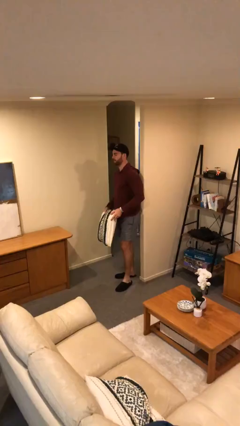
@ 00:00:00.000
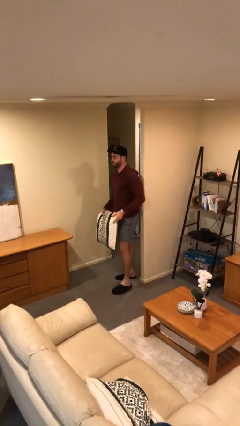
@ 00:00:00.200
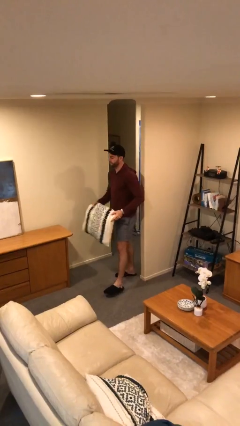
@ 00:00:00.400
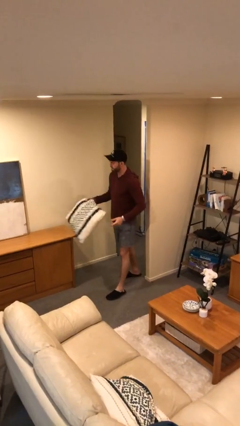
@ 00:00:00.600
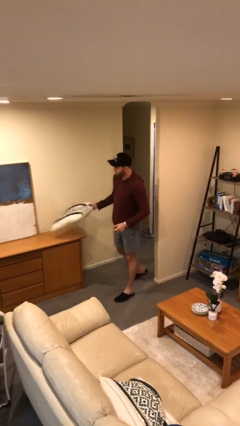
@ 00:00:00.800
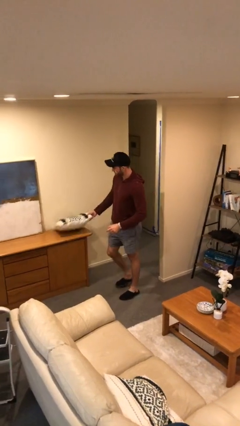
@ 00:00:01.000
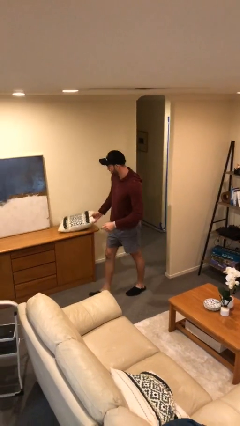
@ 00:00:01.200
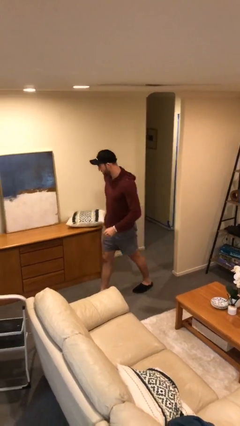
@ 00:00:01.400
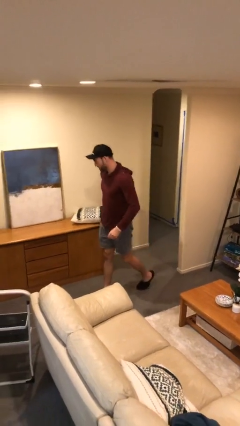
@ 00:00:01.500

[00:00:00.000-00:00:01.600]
person puts down object on table

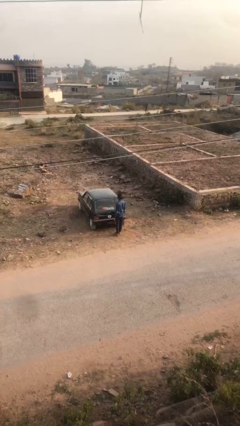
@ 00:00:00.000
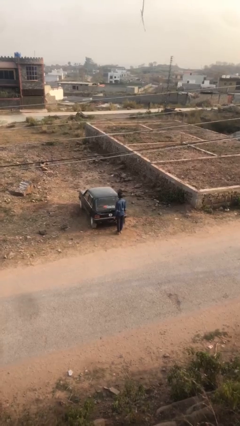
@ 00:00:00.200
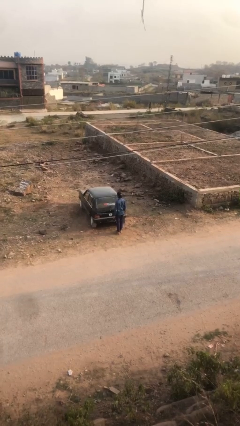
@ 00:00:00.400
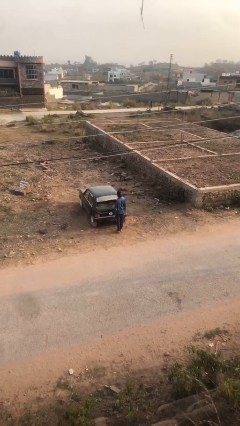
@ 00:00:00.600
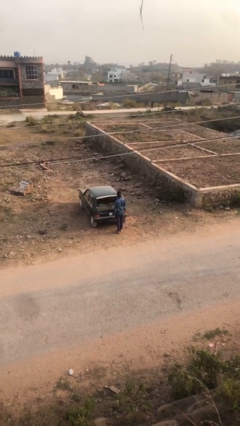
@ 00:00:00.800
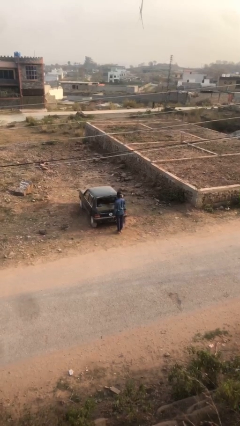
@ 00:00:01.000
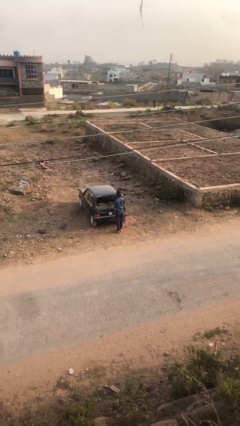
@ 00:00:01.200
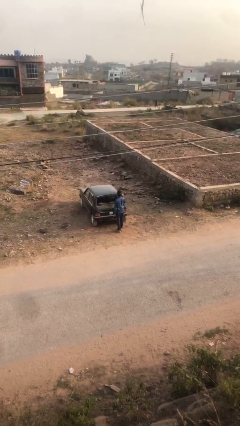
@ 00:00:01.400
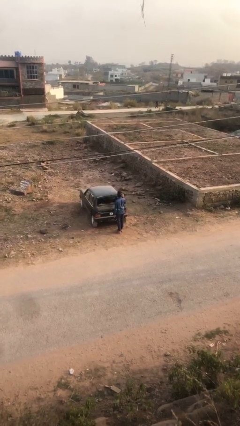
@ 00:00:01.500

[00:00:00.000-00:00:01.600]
person opens car trunk

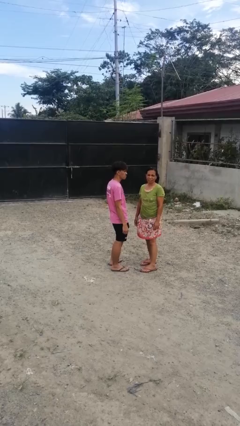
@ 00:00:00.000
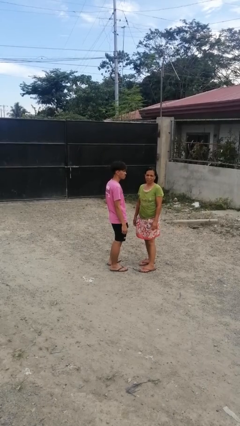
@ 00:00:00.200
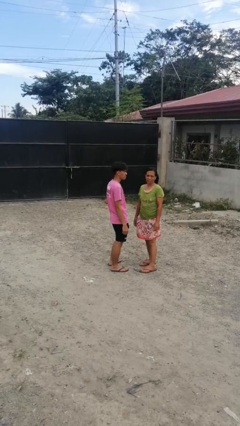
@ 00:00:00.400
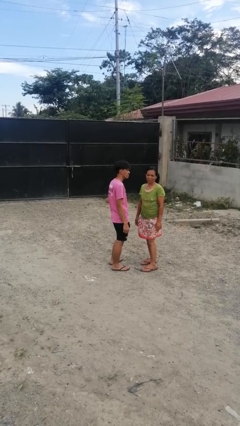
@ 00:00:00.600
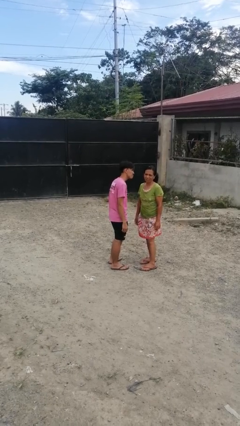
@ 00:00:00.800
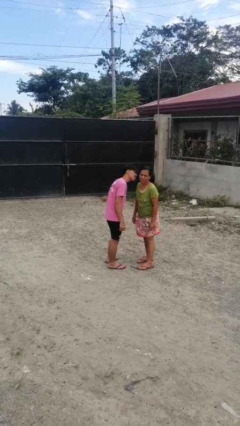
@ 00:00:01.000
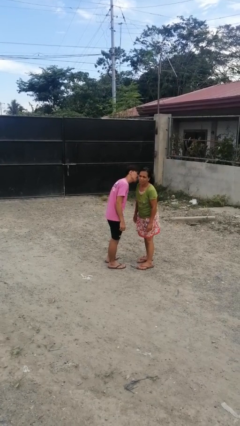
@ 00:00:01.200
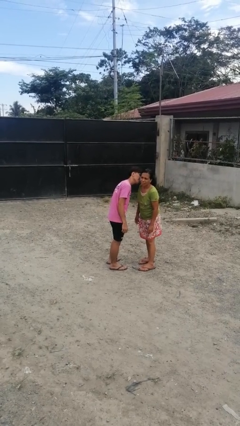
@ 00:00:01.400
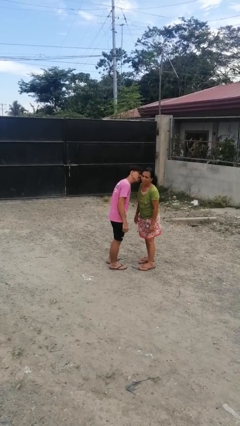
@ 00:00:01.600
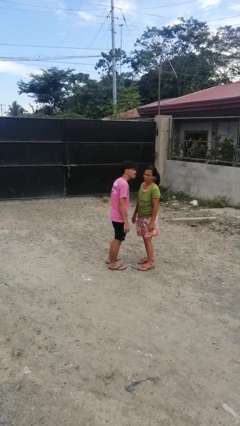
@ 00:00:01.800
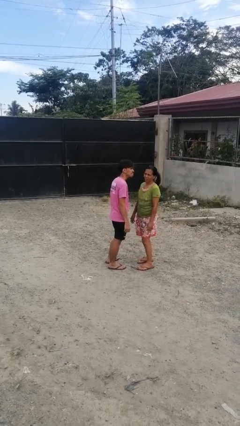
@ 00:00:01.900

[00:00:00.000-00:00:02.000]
person kisses cheek of person

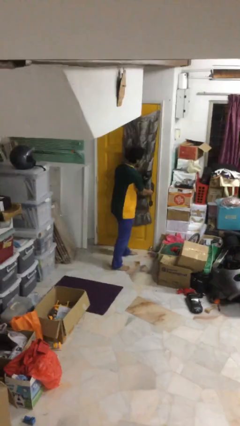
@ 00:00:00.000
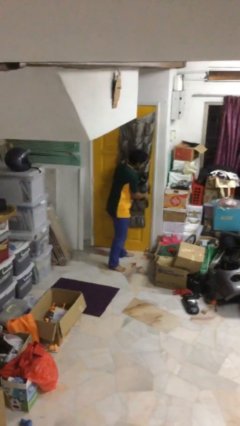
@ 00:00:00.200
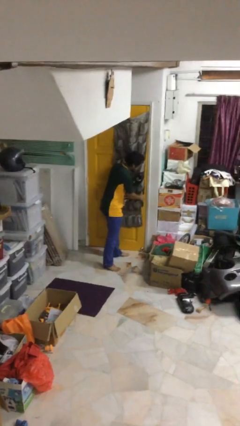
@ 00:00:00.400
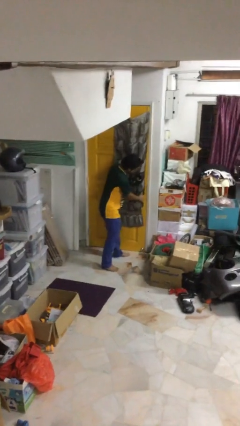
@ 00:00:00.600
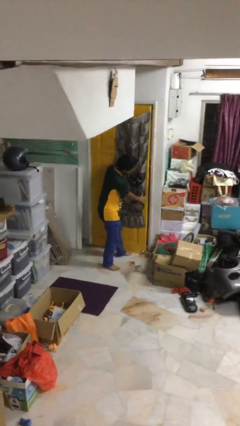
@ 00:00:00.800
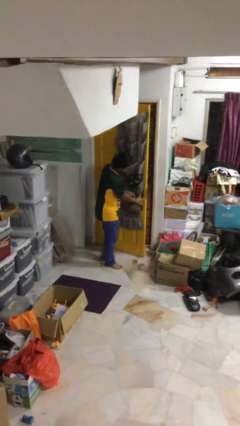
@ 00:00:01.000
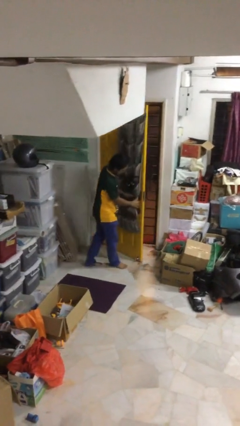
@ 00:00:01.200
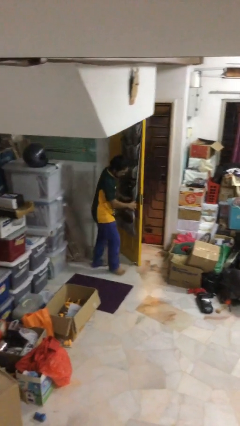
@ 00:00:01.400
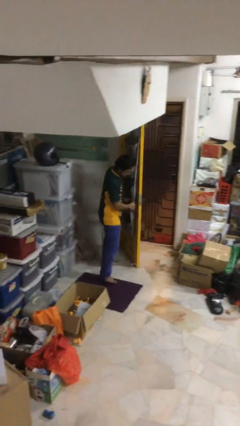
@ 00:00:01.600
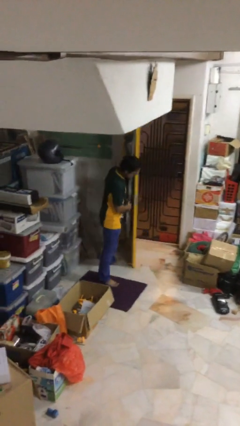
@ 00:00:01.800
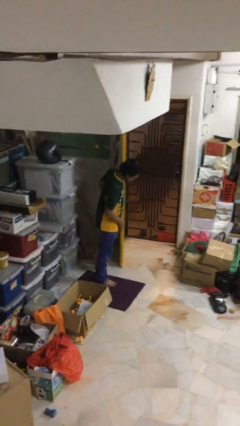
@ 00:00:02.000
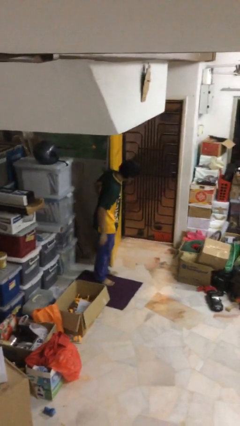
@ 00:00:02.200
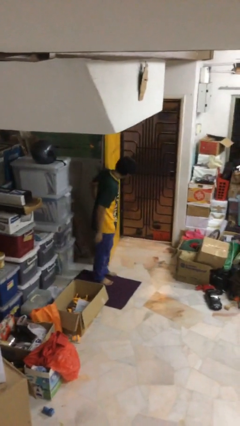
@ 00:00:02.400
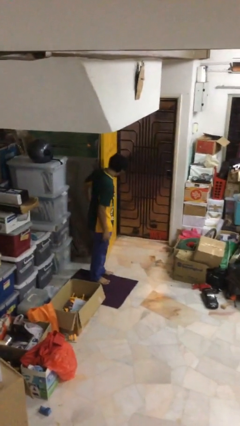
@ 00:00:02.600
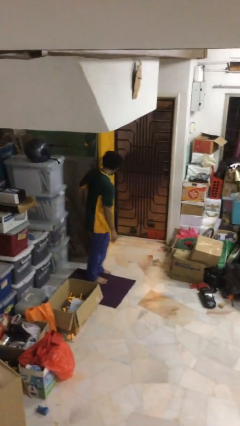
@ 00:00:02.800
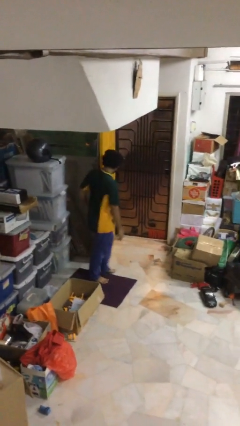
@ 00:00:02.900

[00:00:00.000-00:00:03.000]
person opens facility door

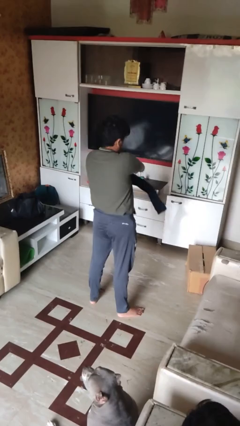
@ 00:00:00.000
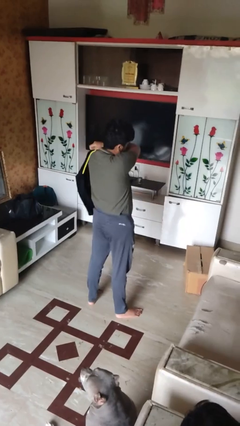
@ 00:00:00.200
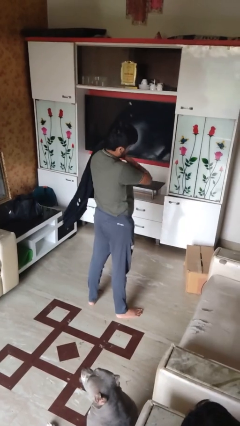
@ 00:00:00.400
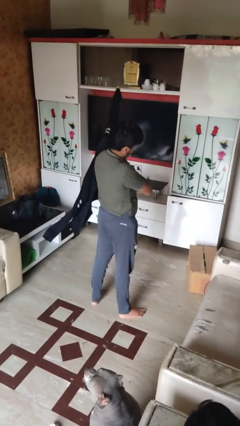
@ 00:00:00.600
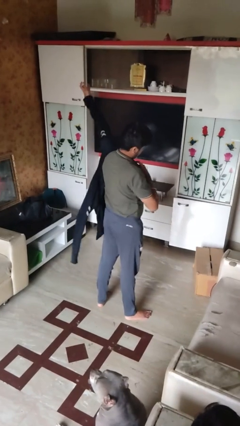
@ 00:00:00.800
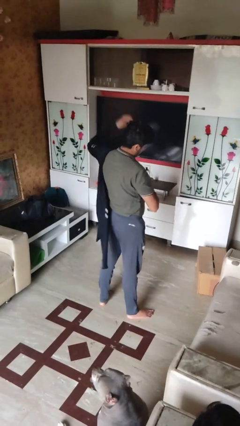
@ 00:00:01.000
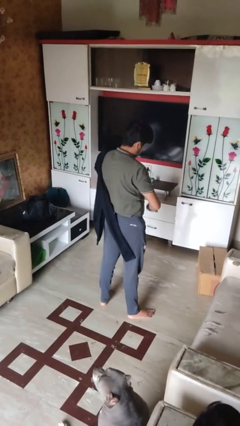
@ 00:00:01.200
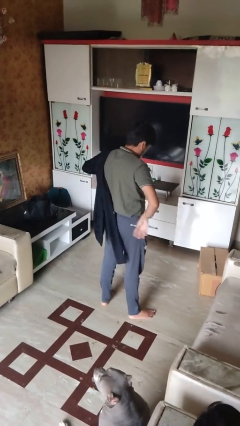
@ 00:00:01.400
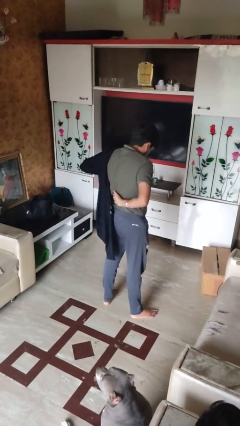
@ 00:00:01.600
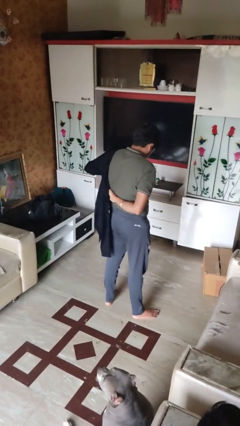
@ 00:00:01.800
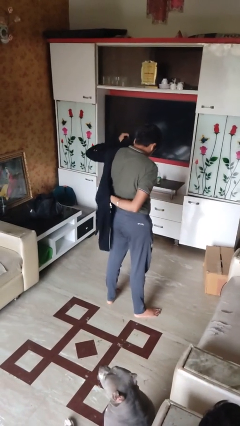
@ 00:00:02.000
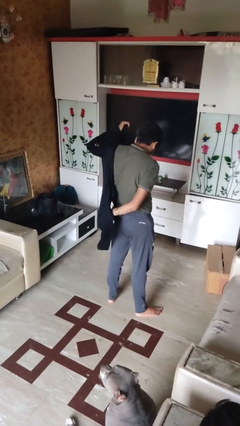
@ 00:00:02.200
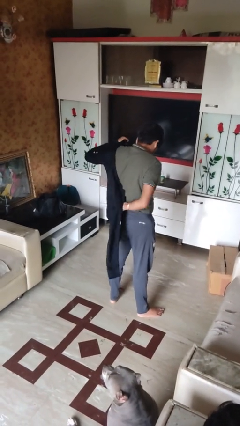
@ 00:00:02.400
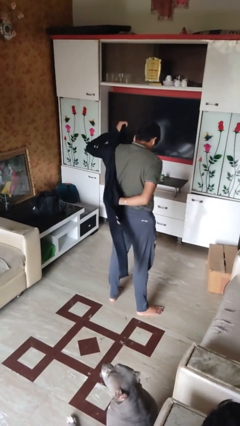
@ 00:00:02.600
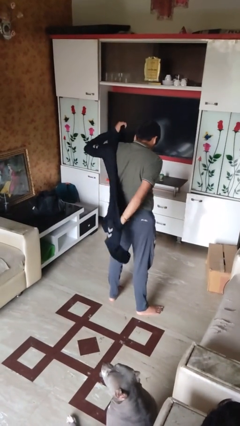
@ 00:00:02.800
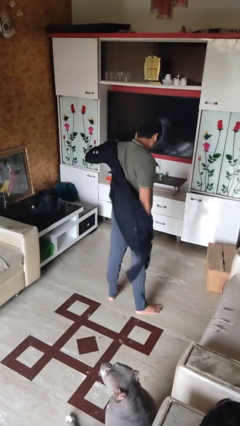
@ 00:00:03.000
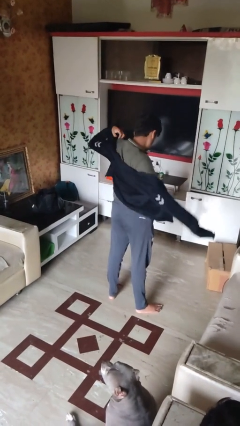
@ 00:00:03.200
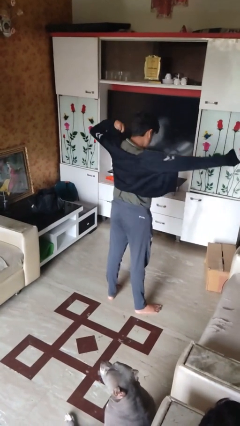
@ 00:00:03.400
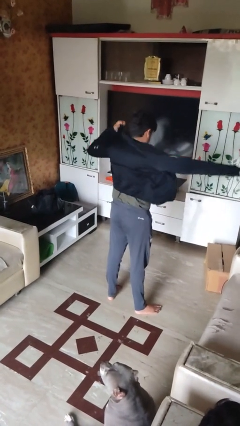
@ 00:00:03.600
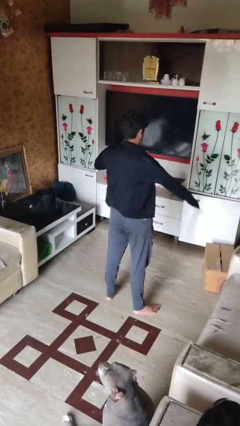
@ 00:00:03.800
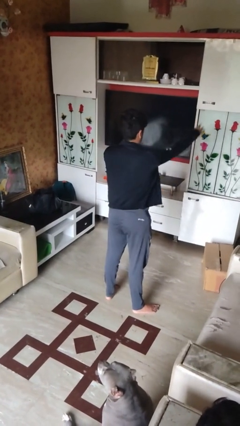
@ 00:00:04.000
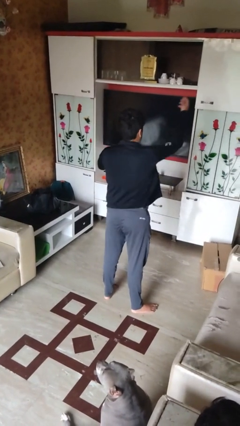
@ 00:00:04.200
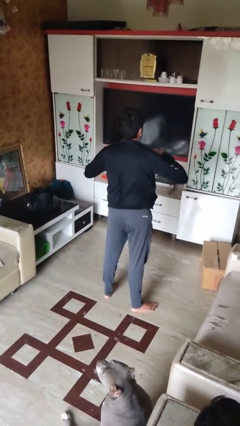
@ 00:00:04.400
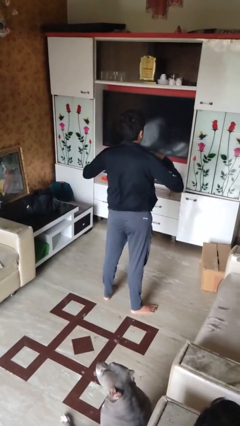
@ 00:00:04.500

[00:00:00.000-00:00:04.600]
person puts on jacket

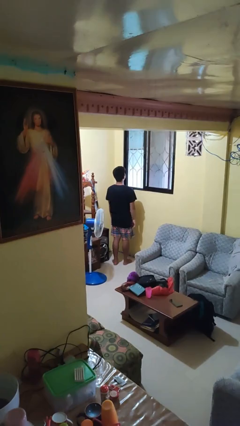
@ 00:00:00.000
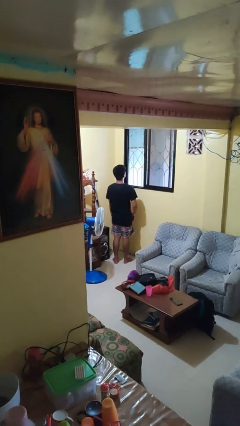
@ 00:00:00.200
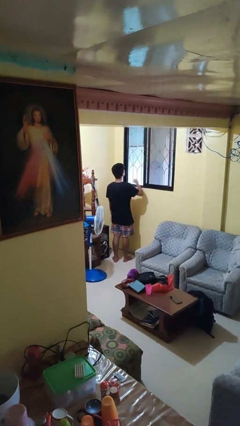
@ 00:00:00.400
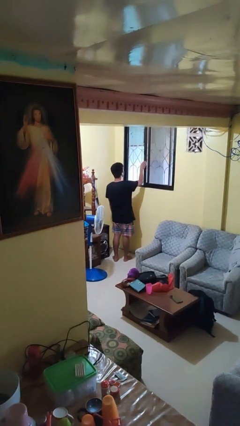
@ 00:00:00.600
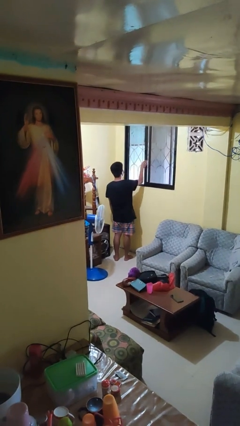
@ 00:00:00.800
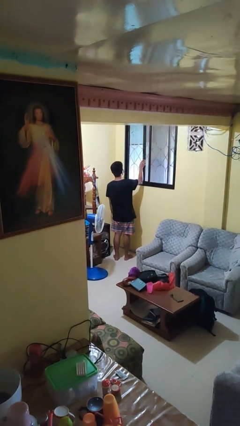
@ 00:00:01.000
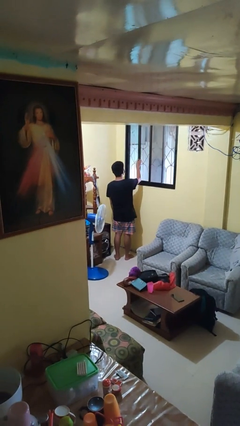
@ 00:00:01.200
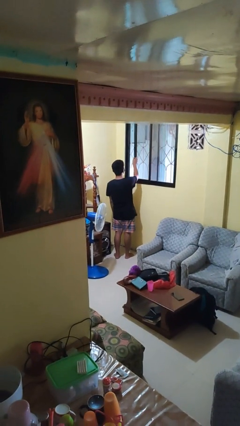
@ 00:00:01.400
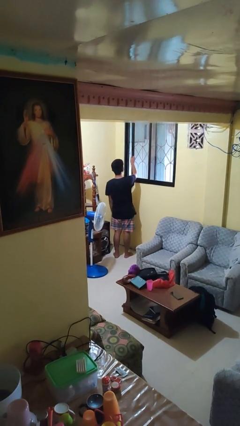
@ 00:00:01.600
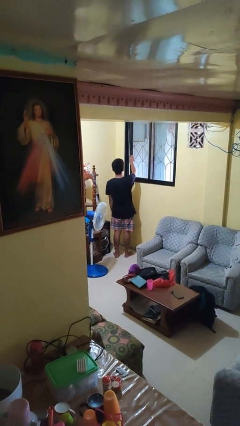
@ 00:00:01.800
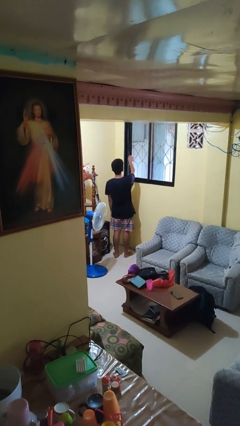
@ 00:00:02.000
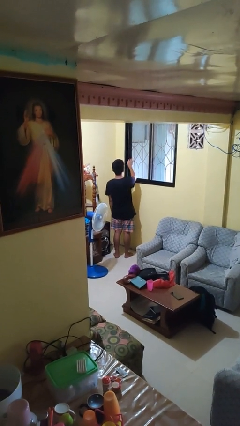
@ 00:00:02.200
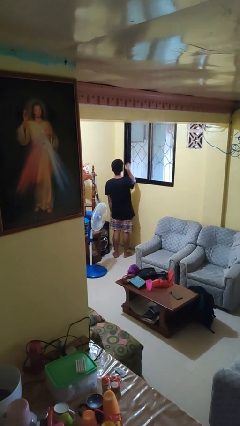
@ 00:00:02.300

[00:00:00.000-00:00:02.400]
person closes home window

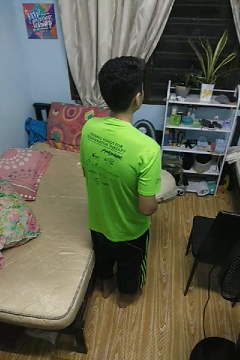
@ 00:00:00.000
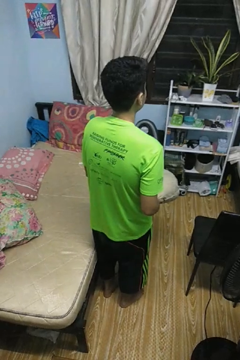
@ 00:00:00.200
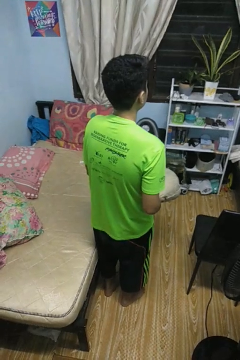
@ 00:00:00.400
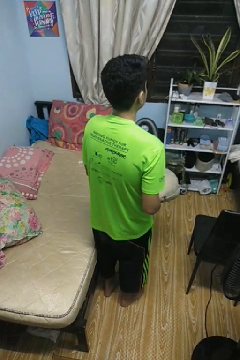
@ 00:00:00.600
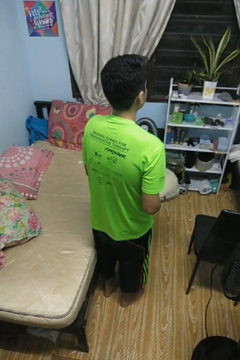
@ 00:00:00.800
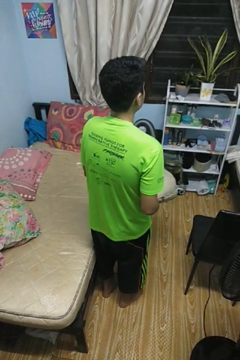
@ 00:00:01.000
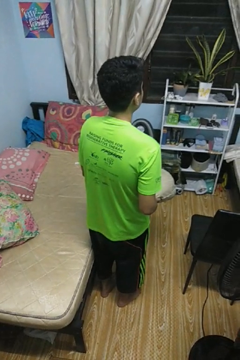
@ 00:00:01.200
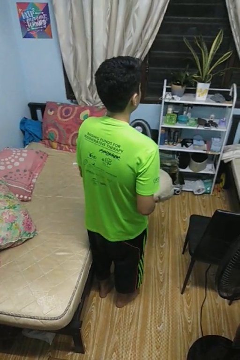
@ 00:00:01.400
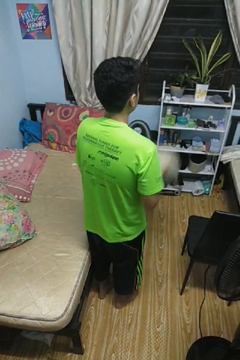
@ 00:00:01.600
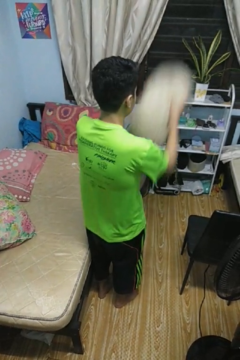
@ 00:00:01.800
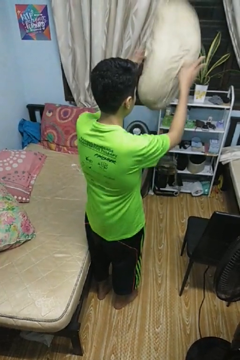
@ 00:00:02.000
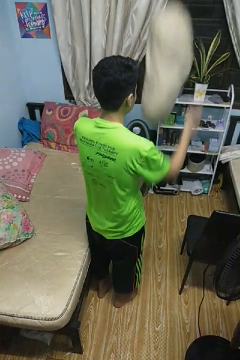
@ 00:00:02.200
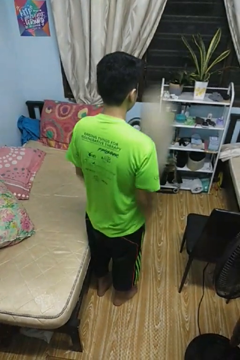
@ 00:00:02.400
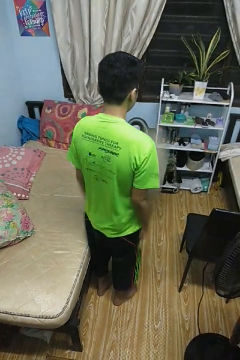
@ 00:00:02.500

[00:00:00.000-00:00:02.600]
person throws object into air
